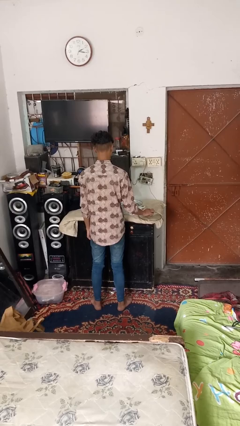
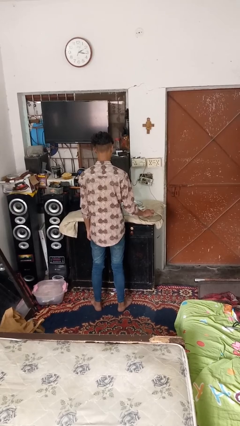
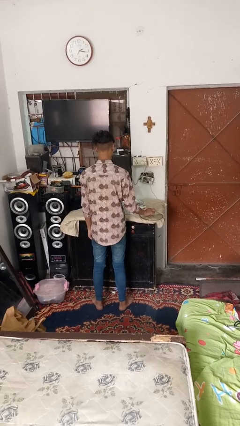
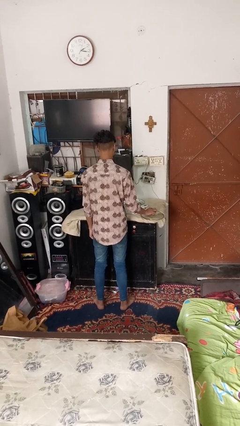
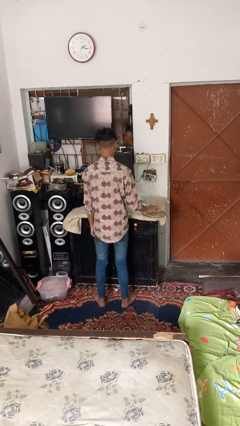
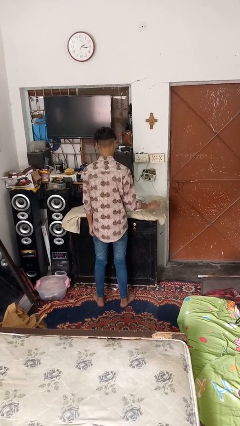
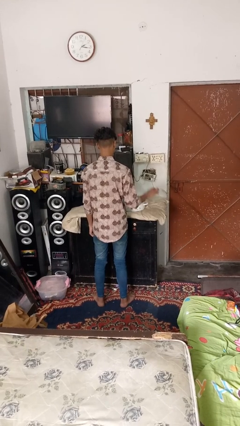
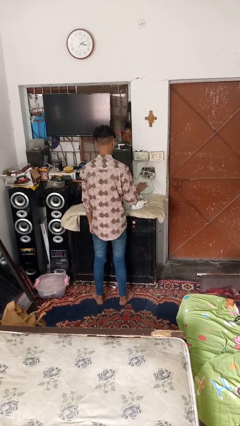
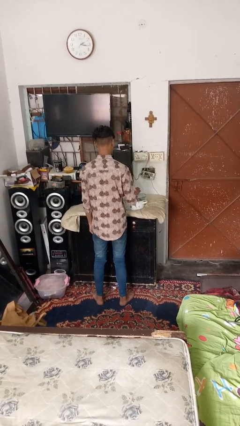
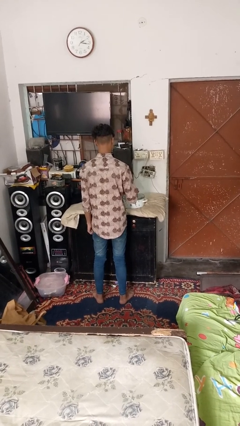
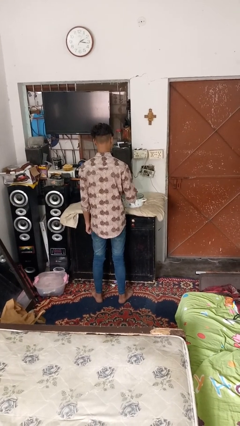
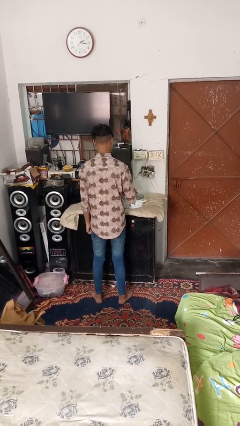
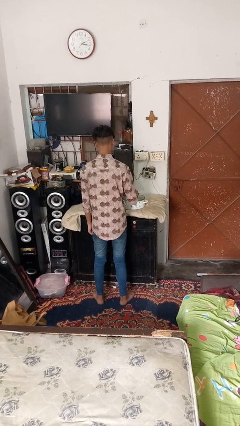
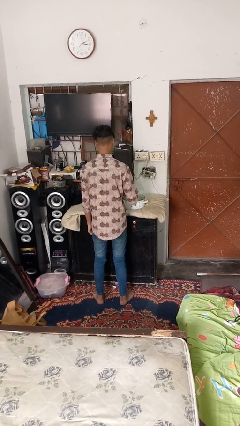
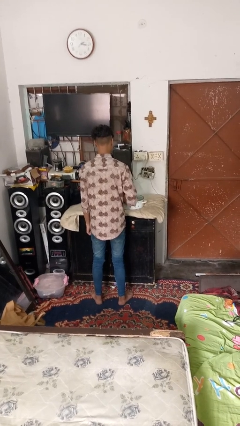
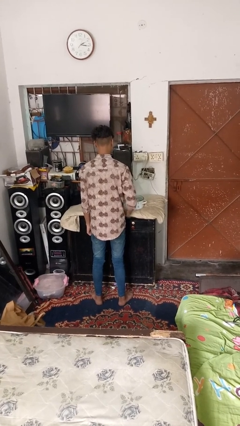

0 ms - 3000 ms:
person closes jar

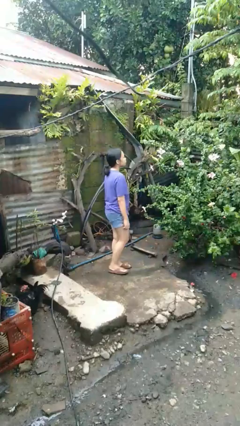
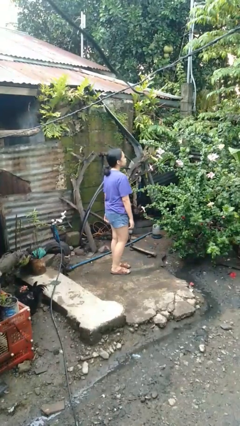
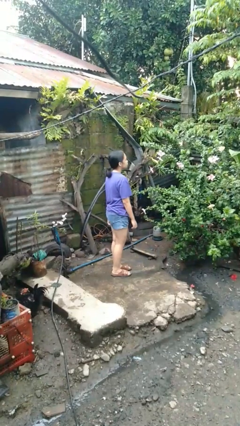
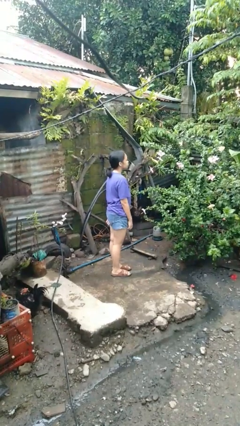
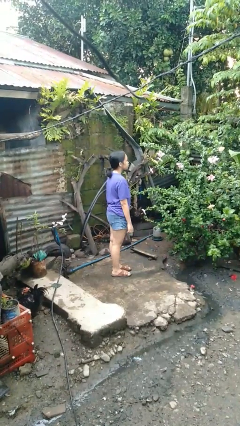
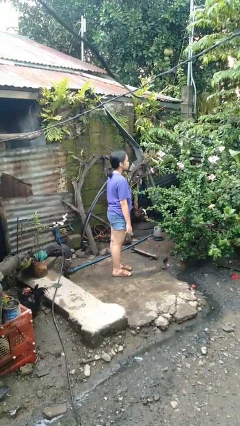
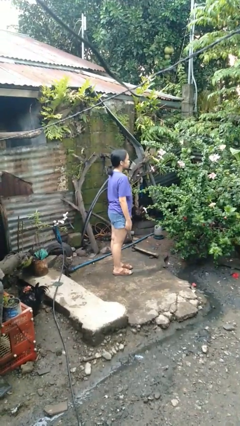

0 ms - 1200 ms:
person shrugs

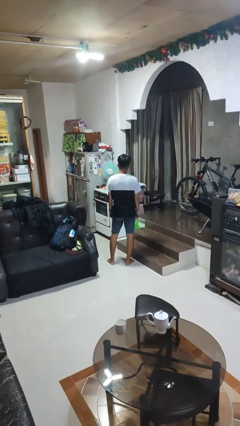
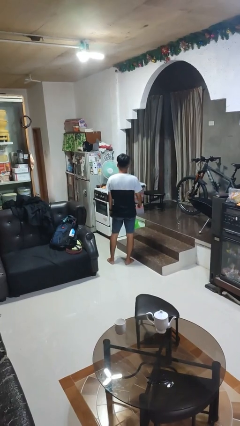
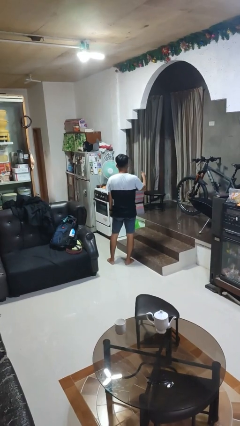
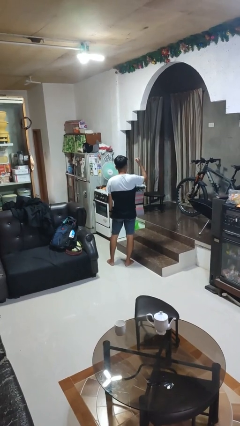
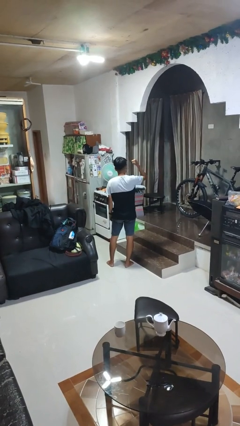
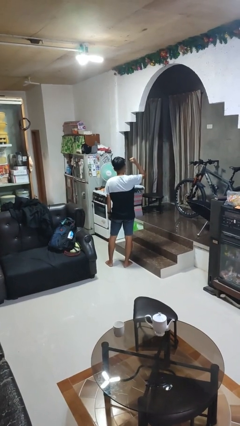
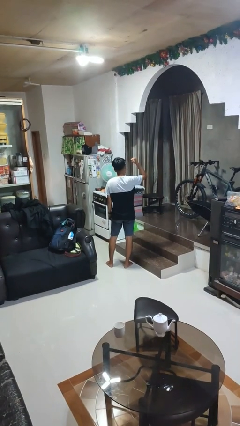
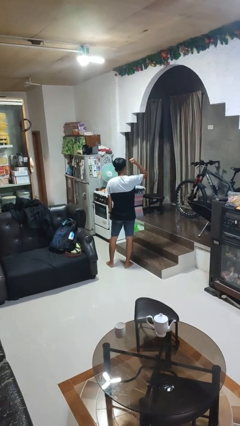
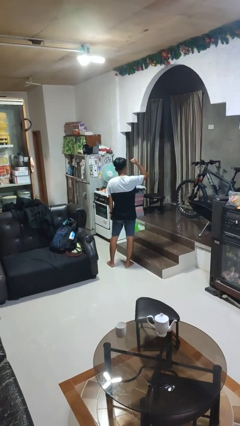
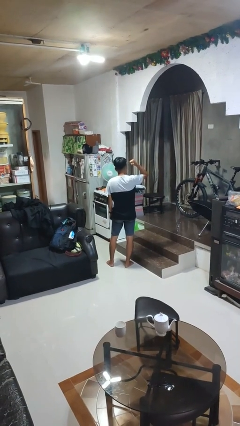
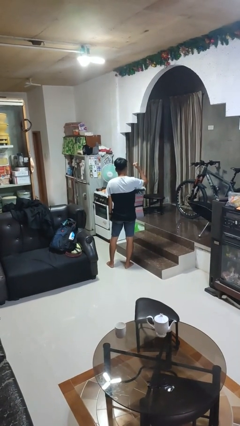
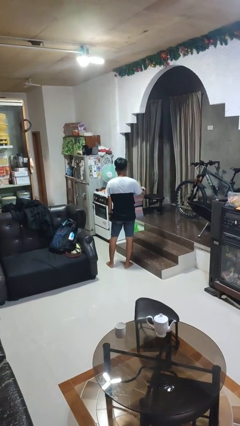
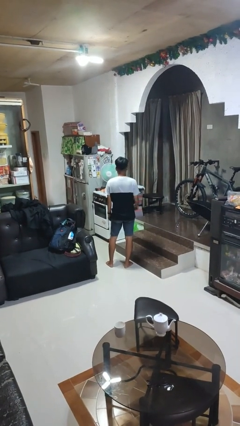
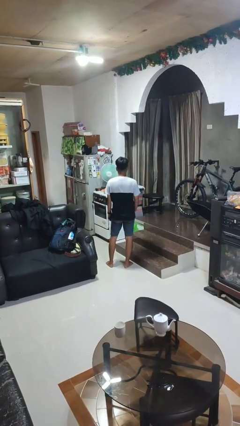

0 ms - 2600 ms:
person gestures behind me

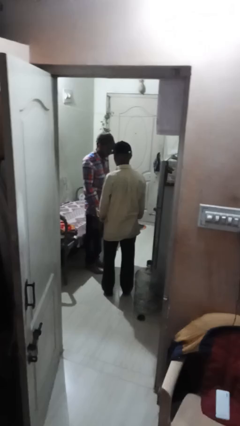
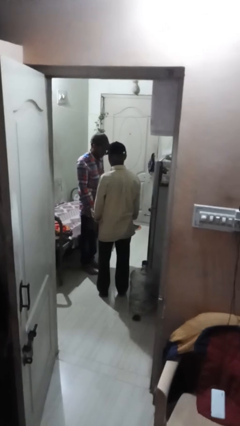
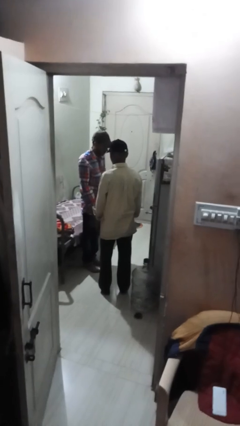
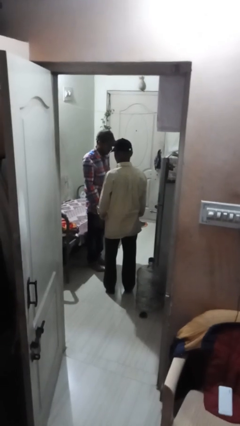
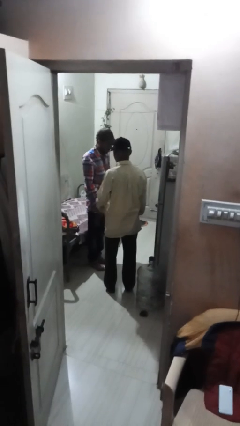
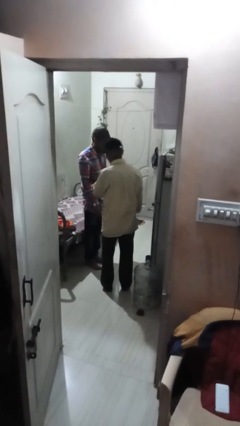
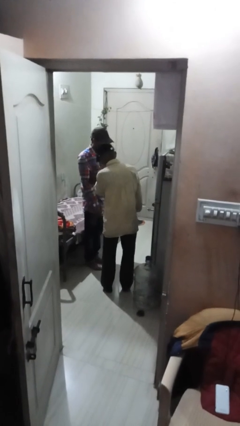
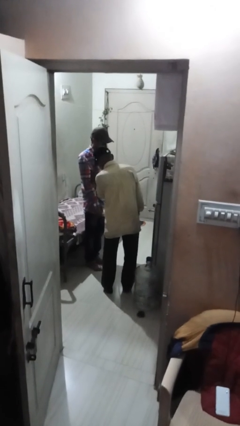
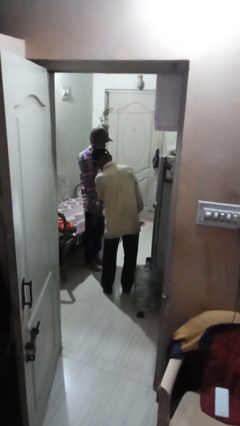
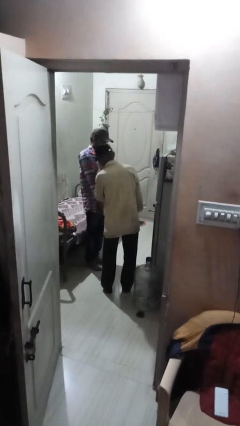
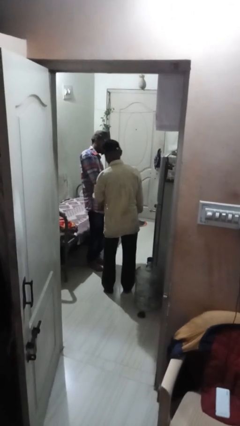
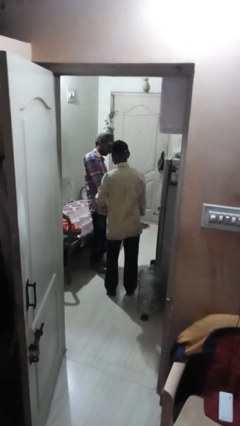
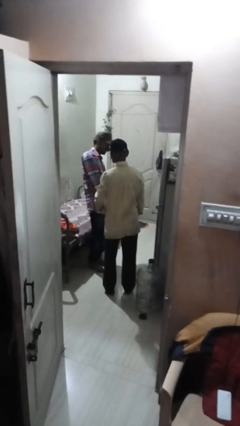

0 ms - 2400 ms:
person tickles person

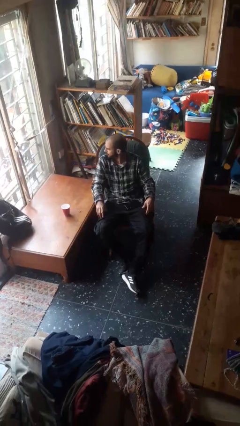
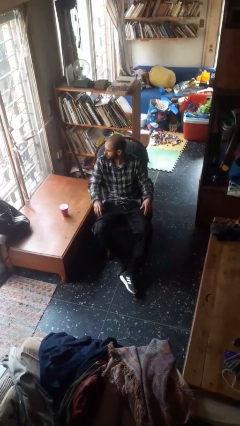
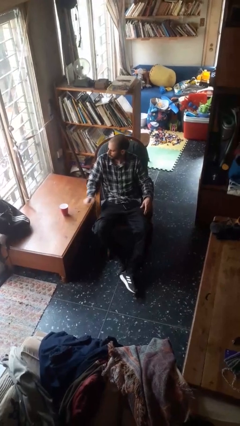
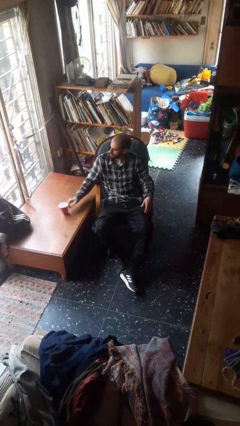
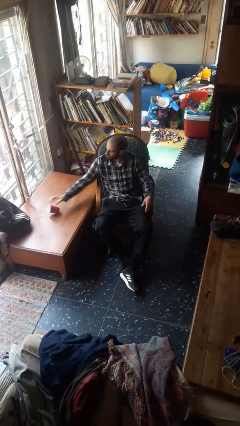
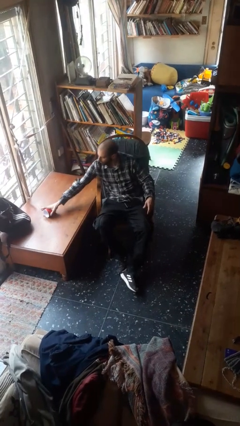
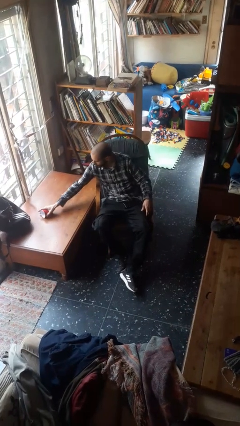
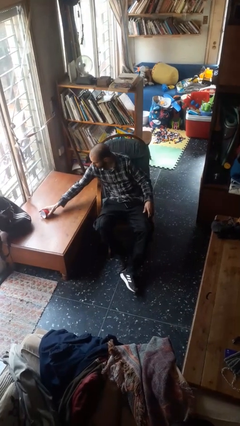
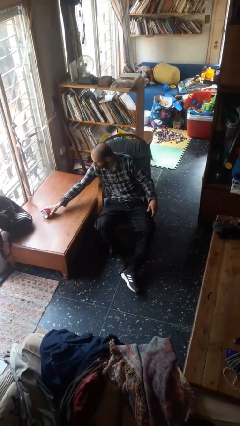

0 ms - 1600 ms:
person knocks over glass

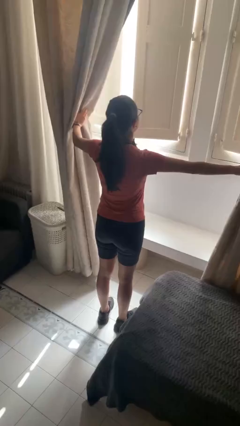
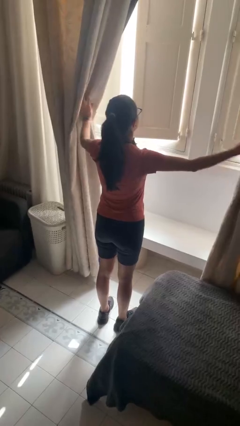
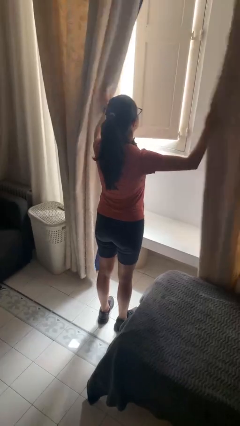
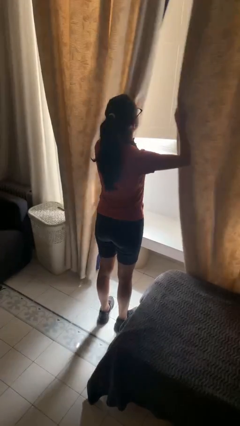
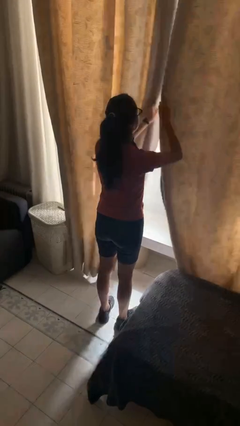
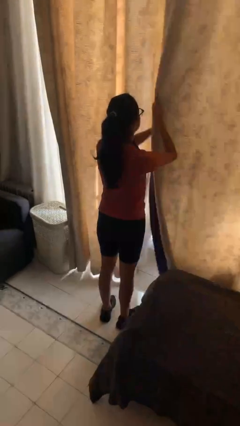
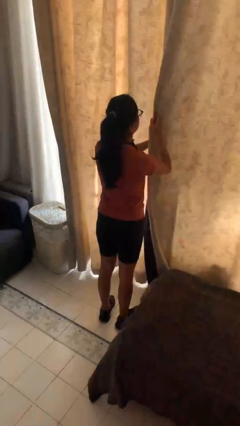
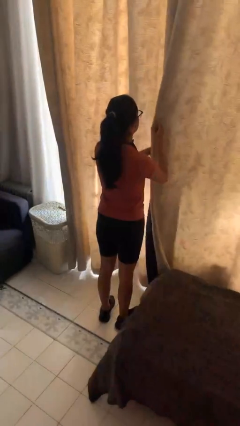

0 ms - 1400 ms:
person closes curtains

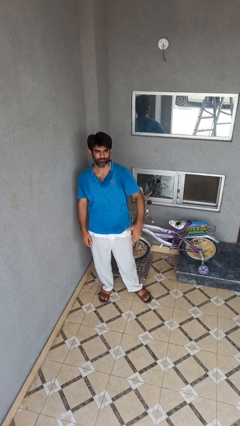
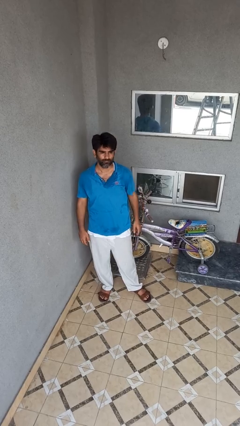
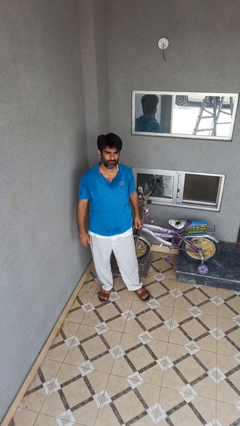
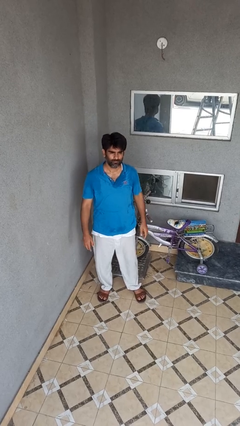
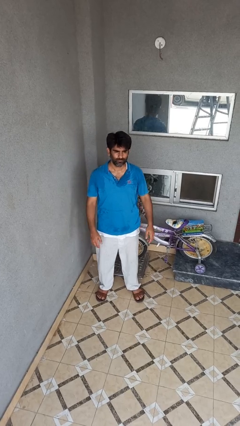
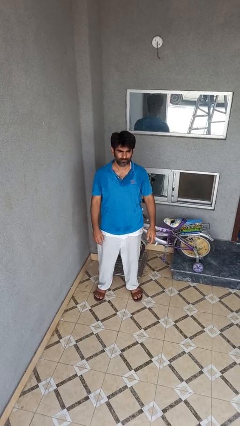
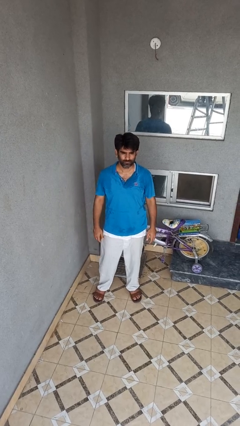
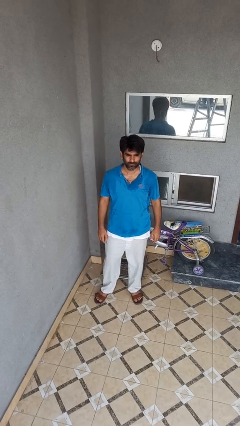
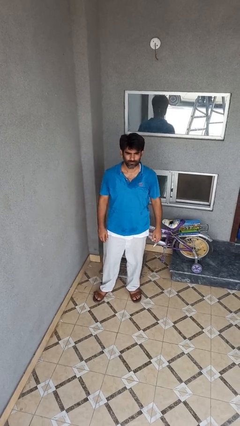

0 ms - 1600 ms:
person gestures lower hand

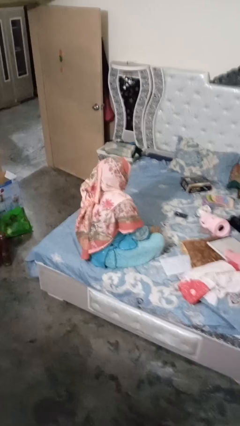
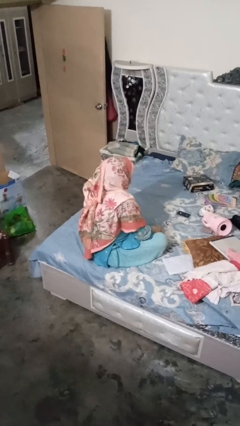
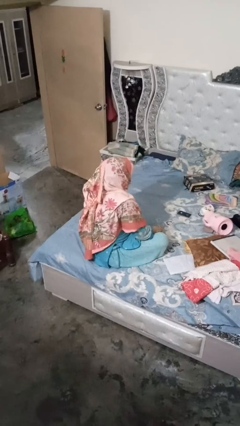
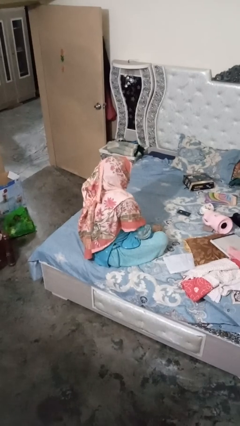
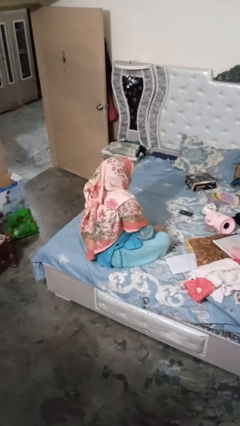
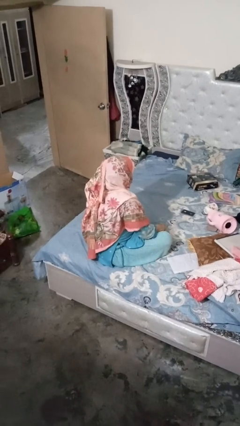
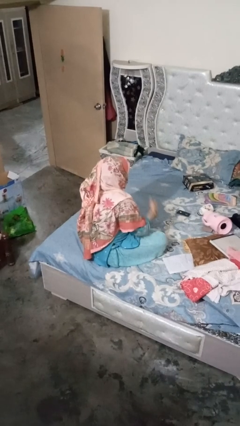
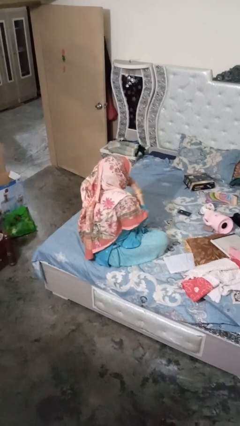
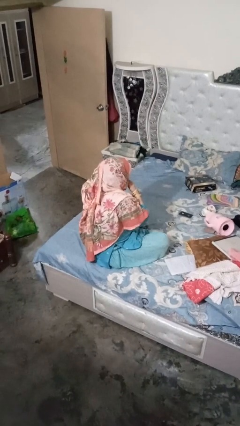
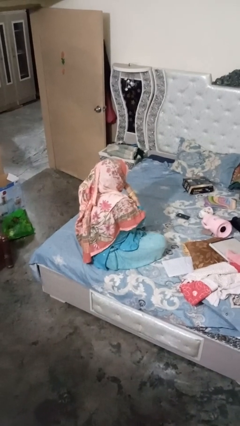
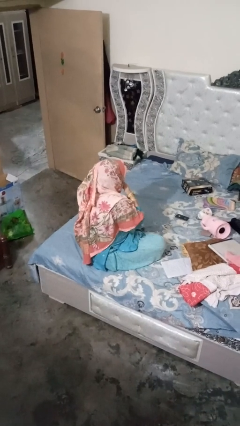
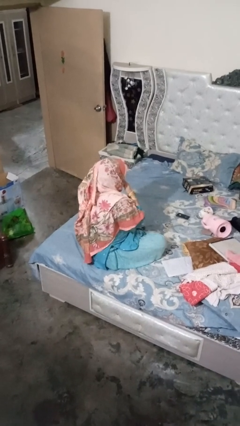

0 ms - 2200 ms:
person strokes chin

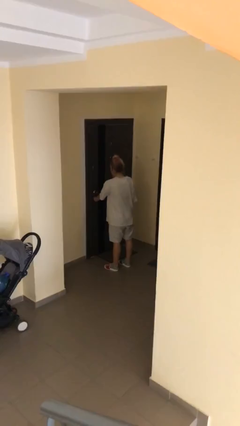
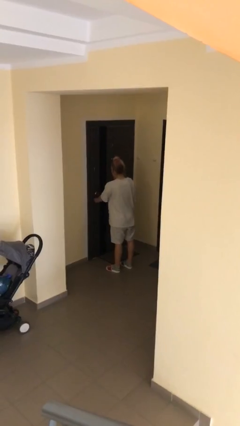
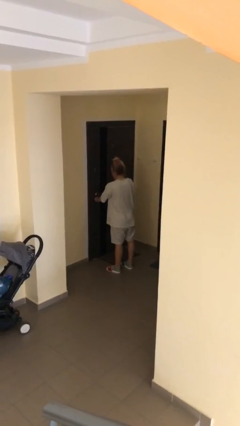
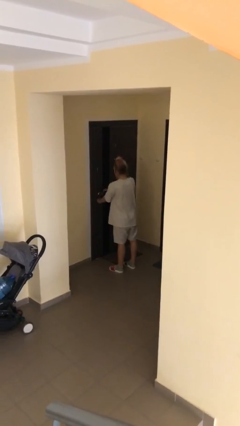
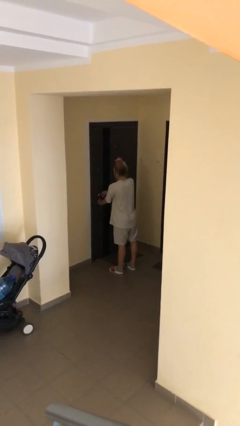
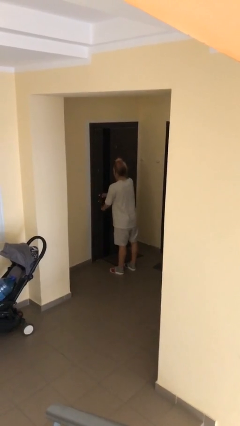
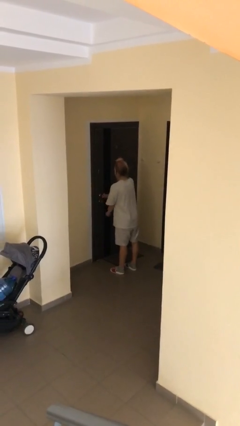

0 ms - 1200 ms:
person unlocks door with keys
